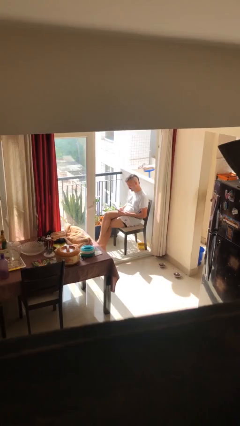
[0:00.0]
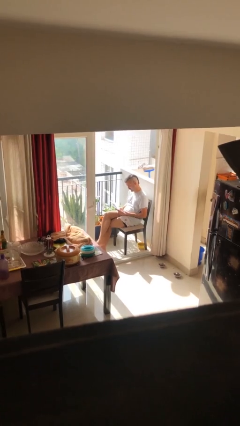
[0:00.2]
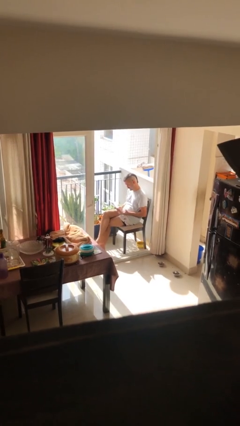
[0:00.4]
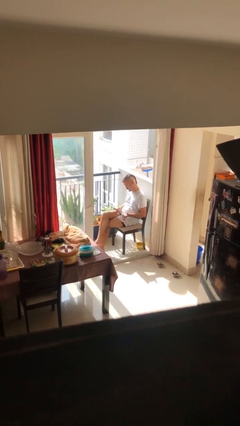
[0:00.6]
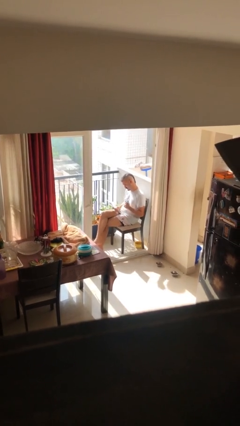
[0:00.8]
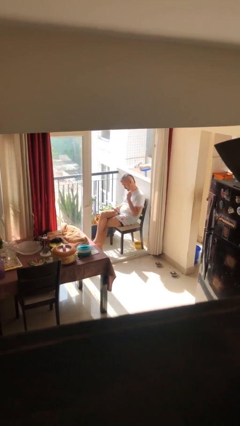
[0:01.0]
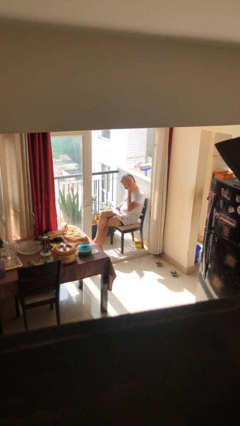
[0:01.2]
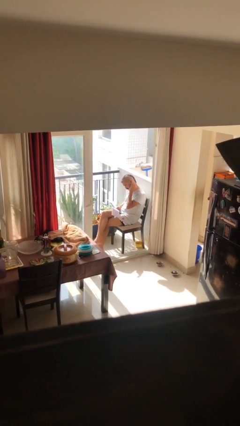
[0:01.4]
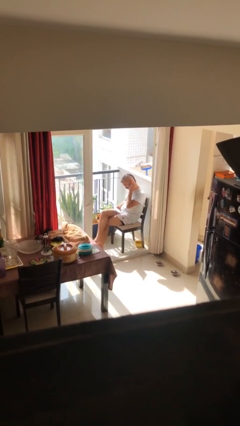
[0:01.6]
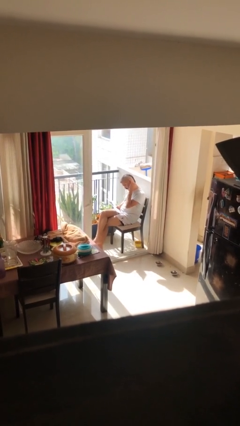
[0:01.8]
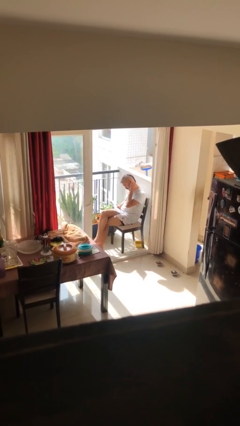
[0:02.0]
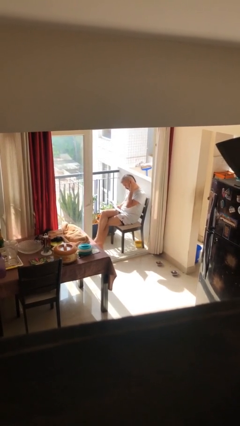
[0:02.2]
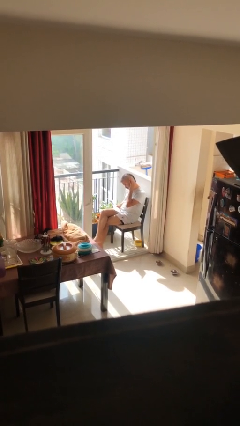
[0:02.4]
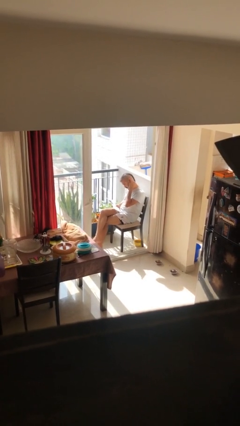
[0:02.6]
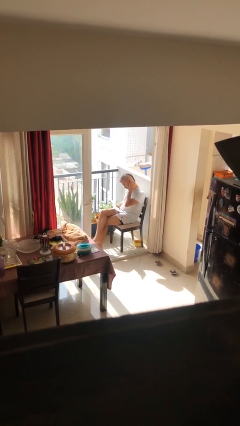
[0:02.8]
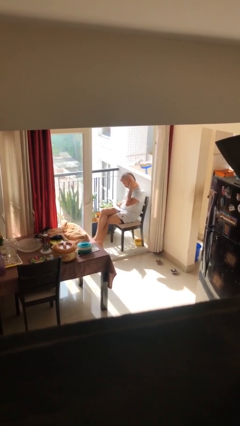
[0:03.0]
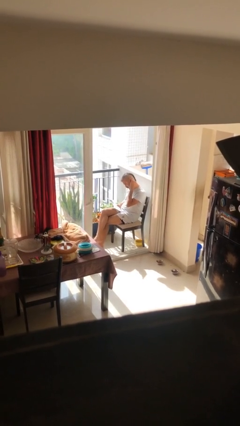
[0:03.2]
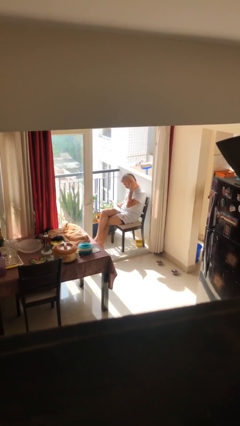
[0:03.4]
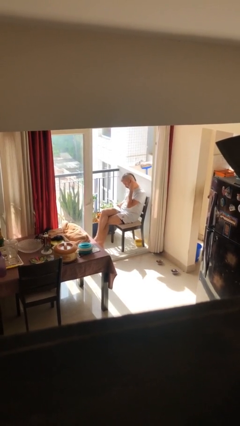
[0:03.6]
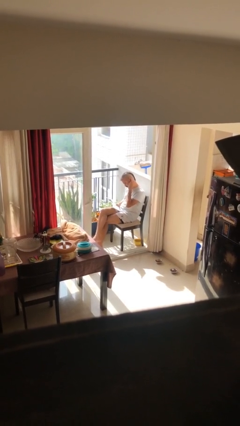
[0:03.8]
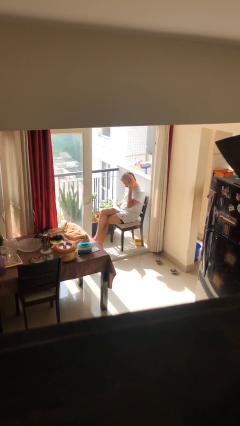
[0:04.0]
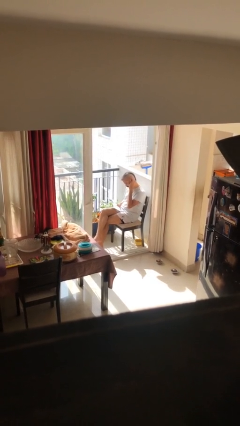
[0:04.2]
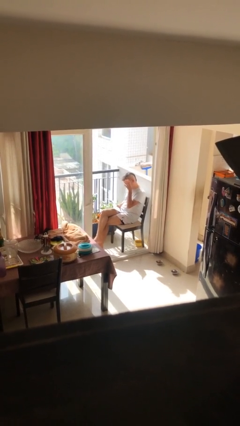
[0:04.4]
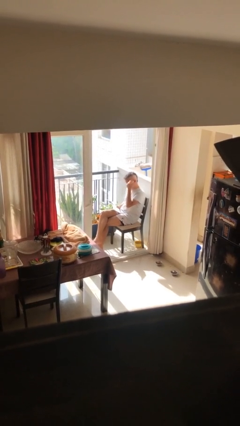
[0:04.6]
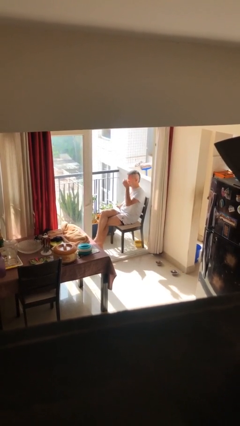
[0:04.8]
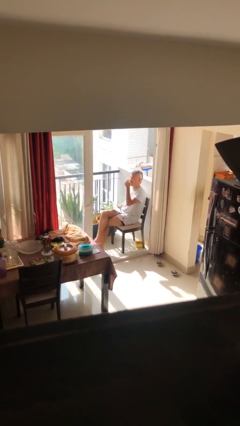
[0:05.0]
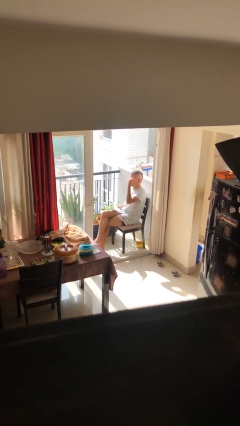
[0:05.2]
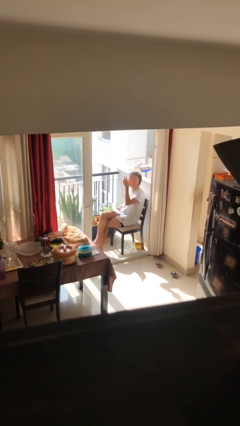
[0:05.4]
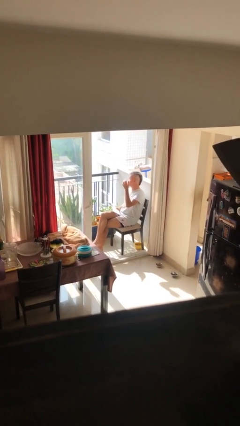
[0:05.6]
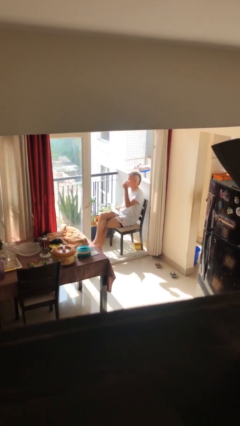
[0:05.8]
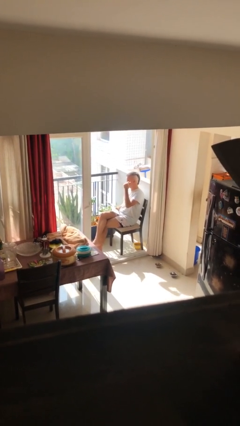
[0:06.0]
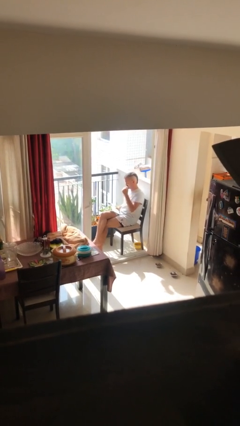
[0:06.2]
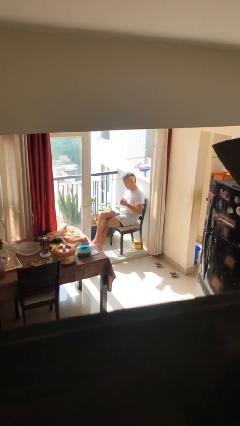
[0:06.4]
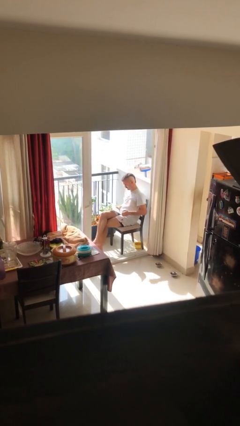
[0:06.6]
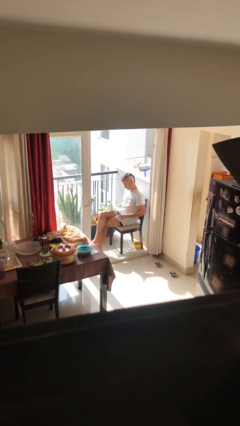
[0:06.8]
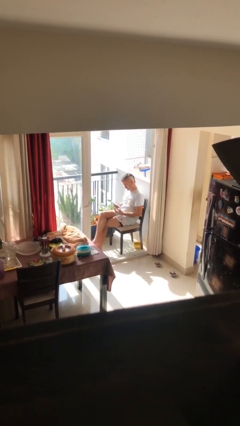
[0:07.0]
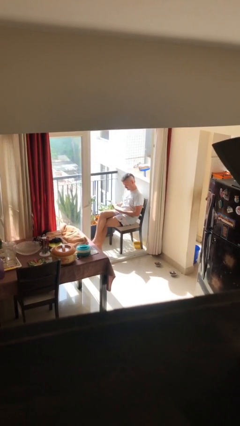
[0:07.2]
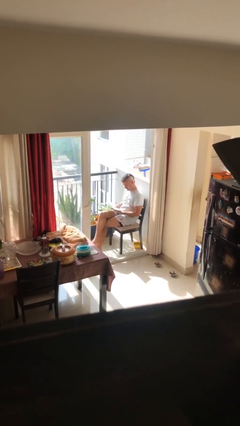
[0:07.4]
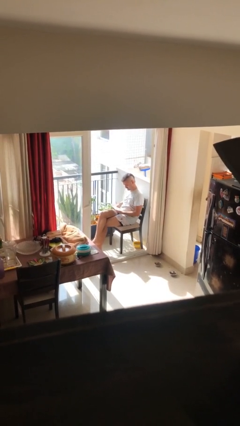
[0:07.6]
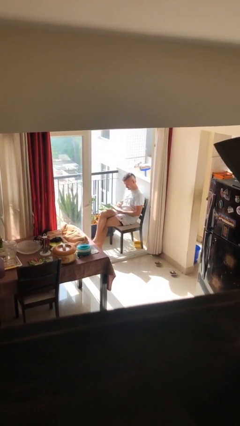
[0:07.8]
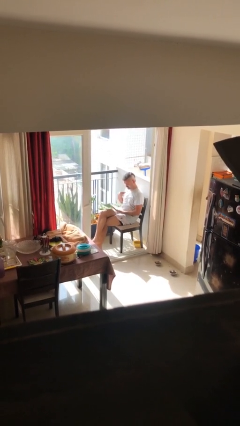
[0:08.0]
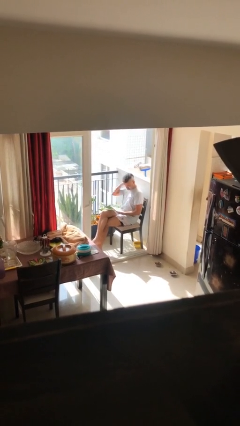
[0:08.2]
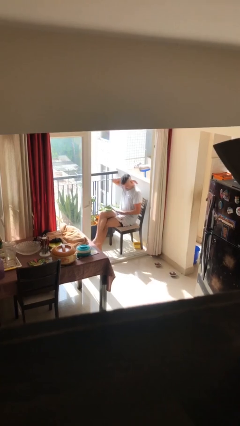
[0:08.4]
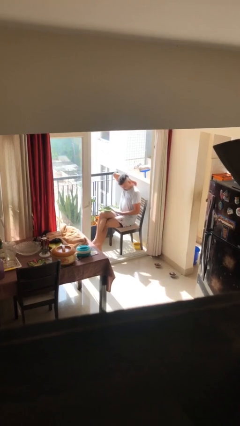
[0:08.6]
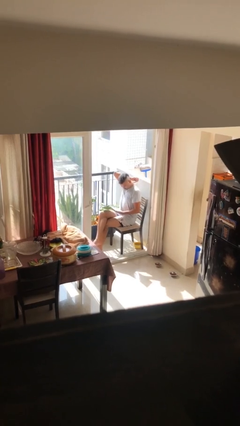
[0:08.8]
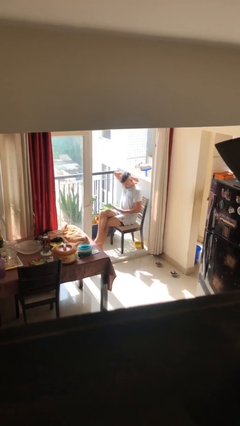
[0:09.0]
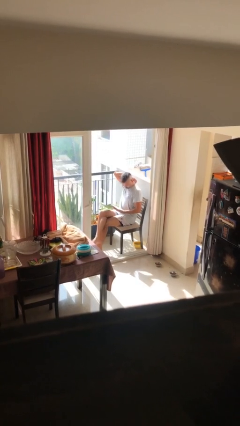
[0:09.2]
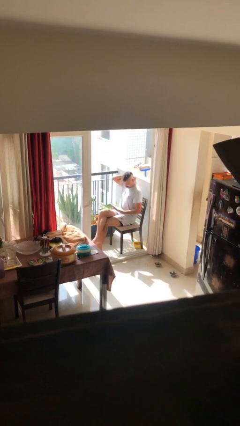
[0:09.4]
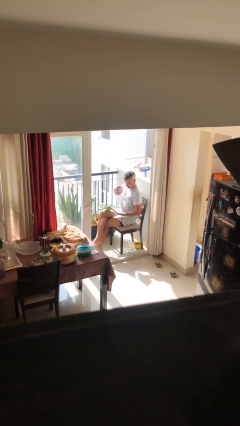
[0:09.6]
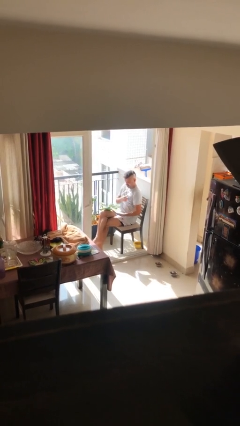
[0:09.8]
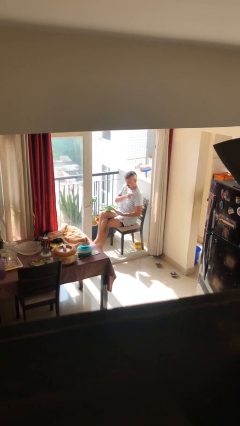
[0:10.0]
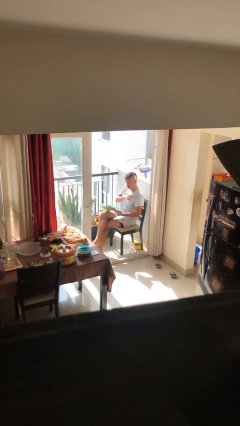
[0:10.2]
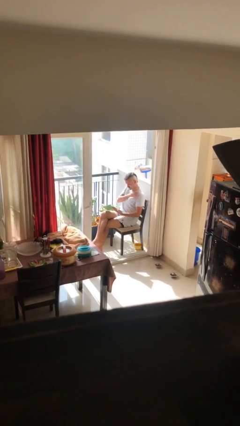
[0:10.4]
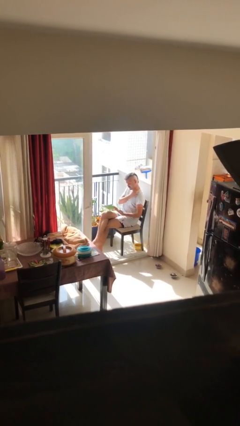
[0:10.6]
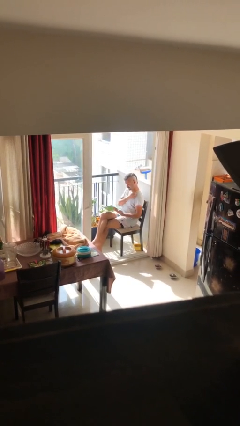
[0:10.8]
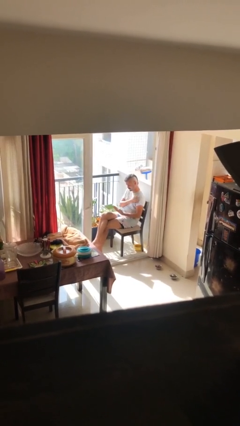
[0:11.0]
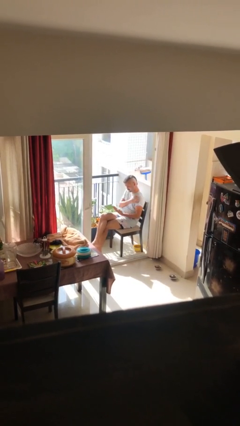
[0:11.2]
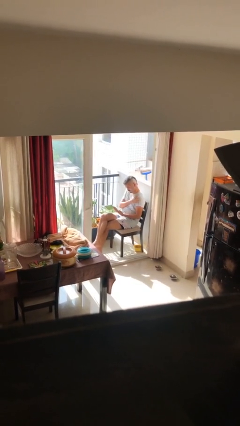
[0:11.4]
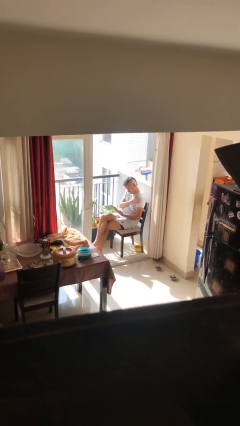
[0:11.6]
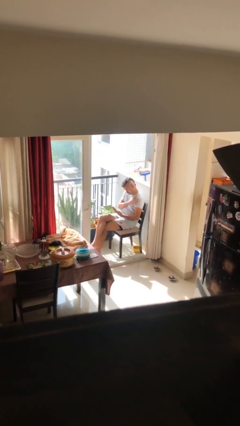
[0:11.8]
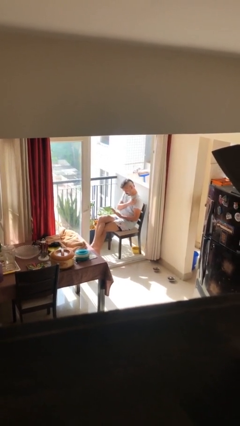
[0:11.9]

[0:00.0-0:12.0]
person reads document

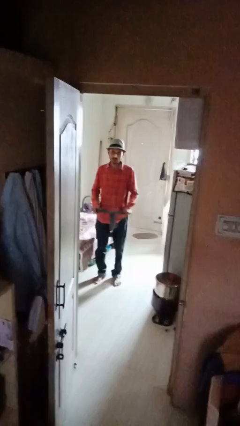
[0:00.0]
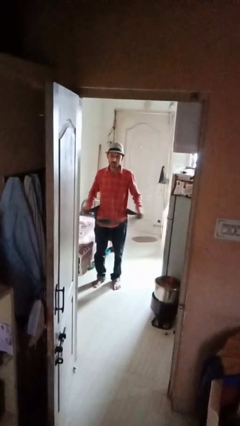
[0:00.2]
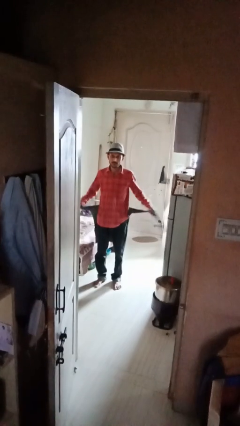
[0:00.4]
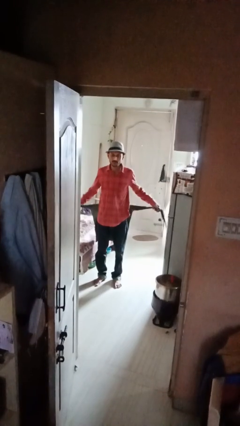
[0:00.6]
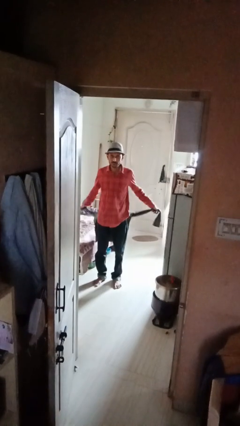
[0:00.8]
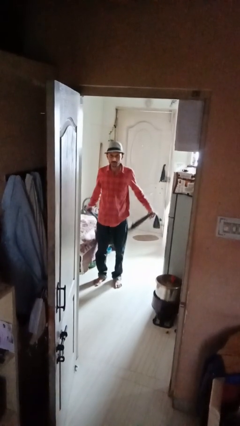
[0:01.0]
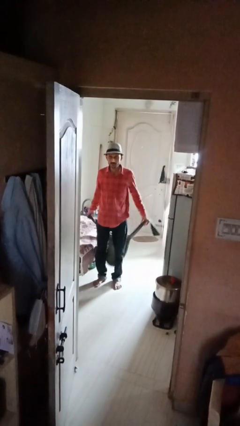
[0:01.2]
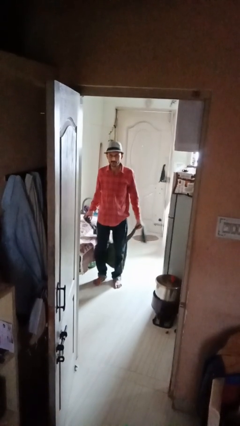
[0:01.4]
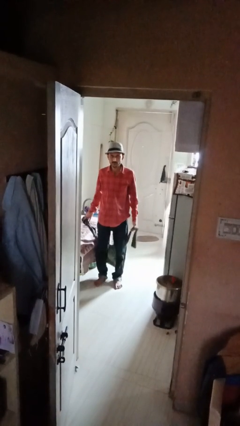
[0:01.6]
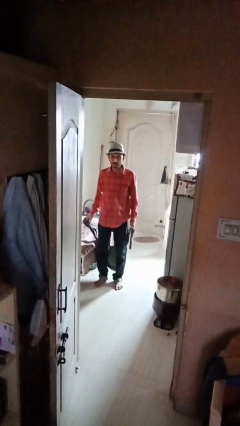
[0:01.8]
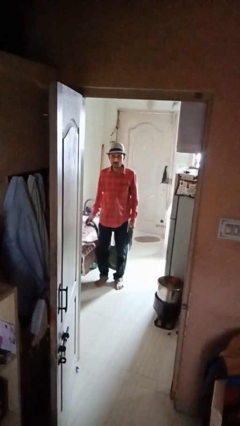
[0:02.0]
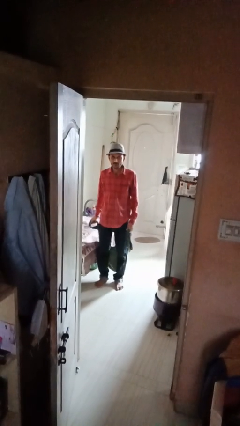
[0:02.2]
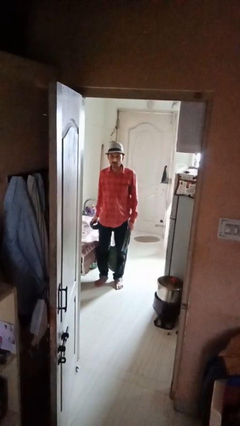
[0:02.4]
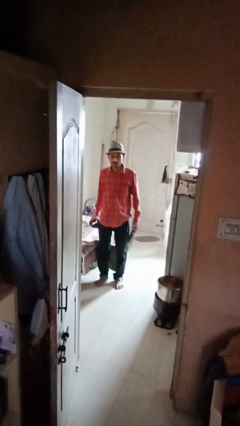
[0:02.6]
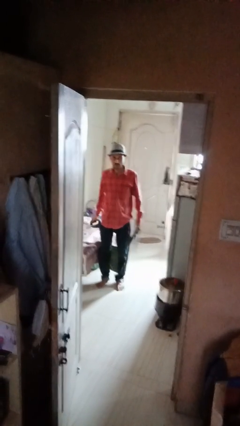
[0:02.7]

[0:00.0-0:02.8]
person unties jacket around waist

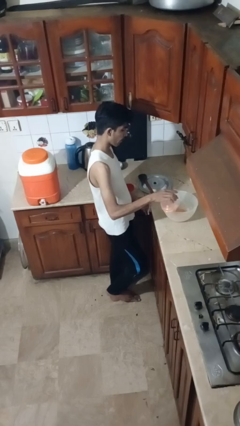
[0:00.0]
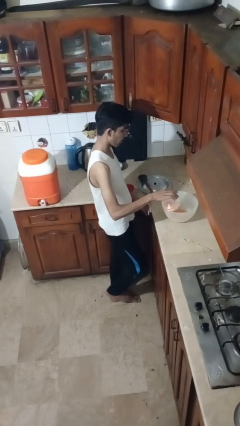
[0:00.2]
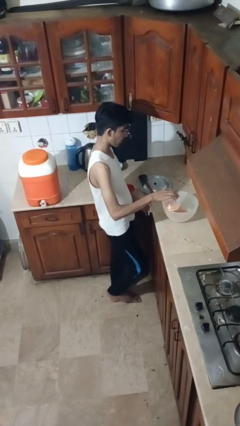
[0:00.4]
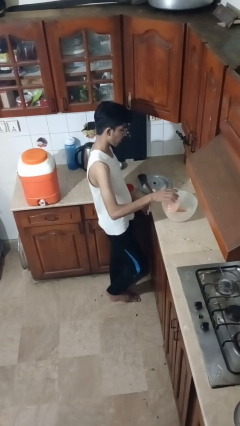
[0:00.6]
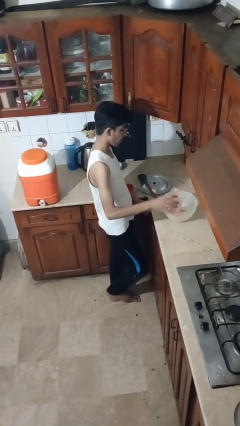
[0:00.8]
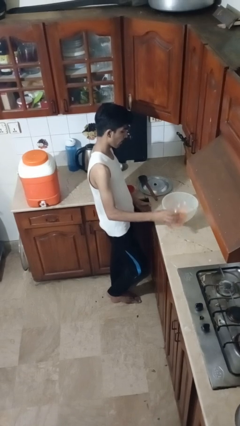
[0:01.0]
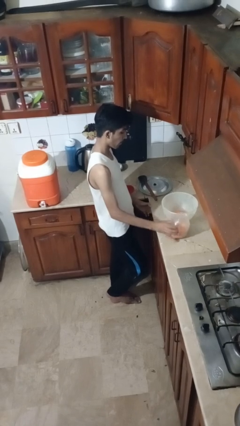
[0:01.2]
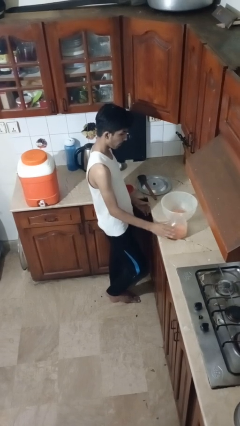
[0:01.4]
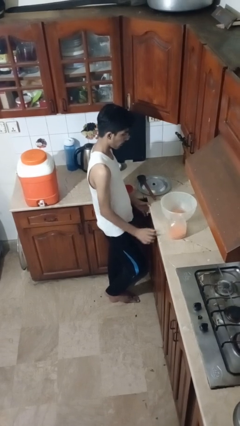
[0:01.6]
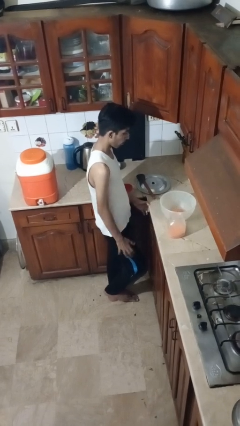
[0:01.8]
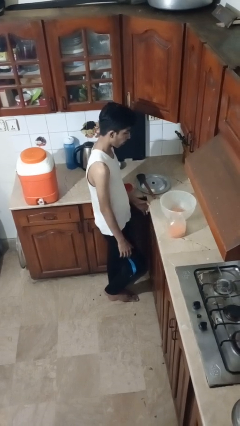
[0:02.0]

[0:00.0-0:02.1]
person pours into bowl

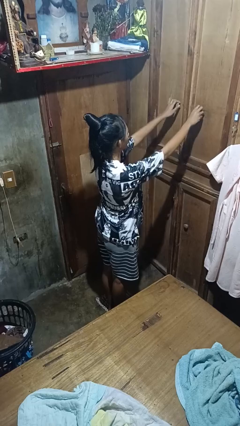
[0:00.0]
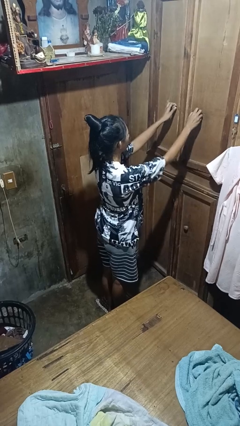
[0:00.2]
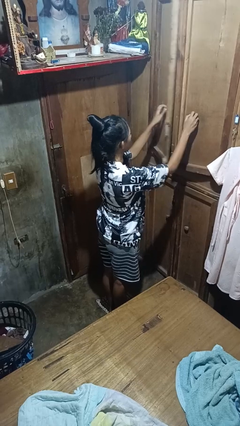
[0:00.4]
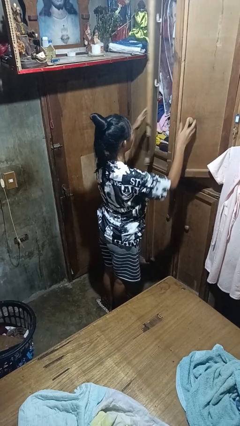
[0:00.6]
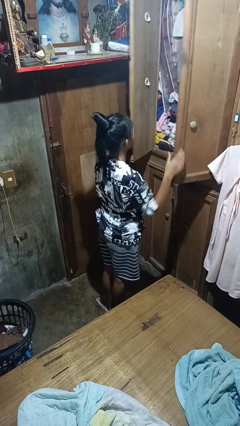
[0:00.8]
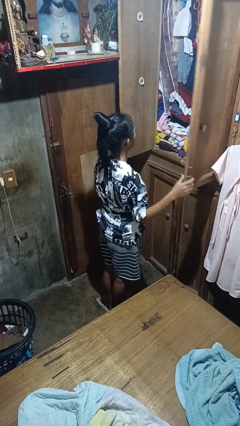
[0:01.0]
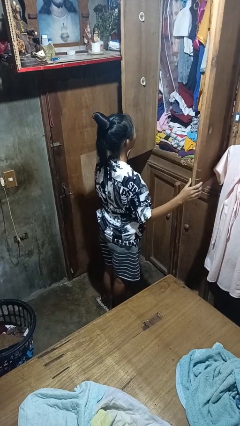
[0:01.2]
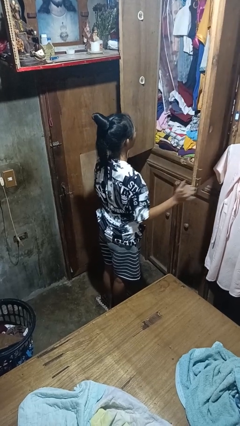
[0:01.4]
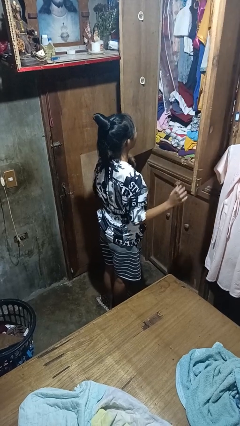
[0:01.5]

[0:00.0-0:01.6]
person opens closet door
